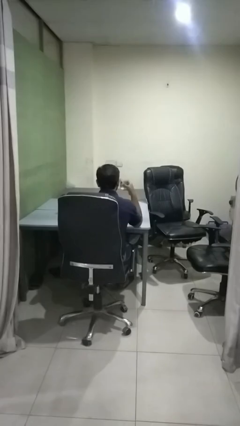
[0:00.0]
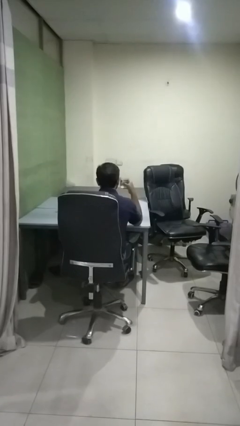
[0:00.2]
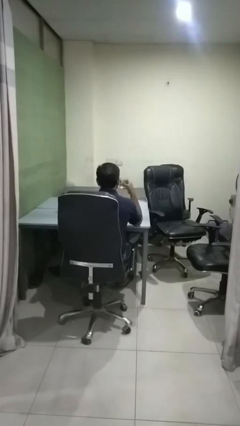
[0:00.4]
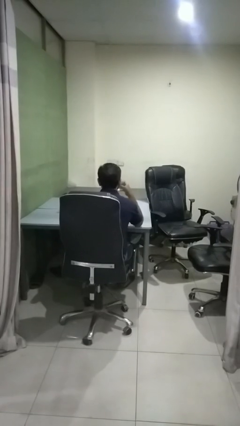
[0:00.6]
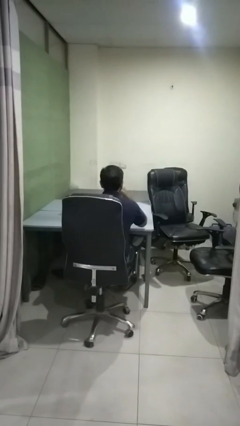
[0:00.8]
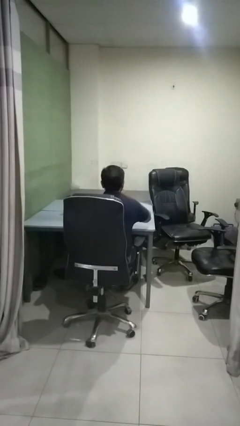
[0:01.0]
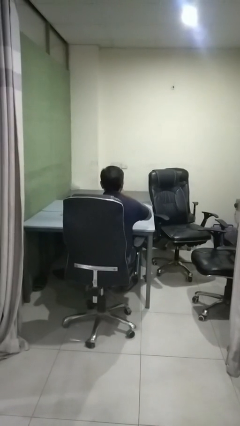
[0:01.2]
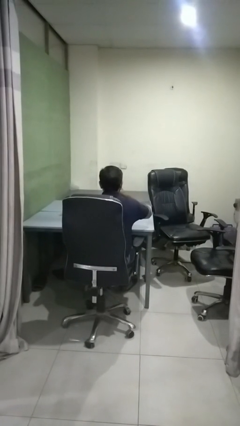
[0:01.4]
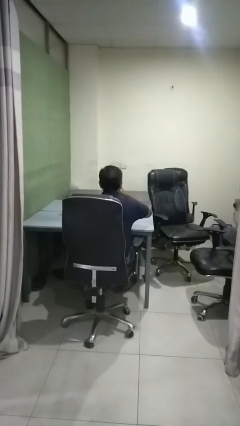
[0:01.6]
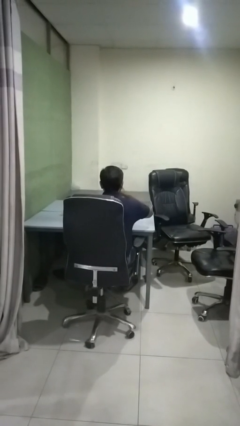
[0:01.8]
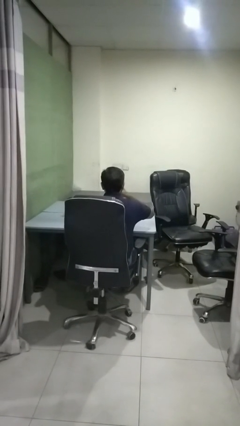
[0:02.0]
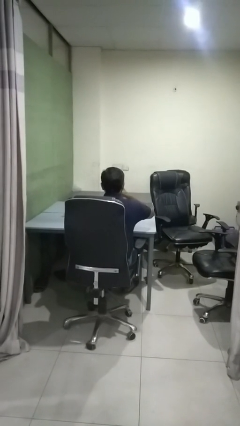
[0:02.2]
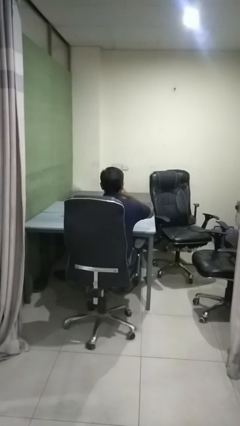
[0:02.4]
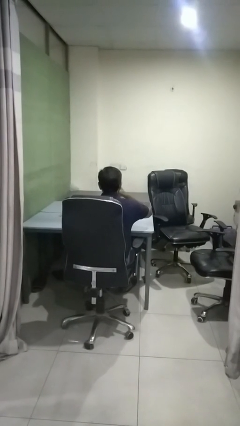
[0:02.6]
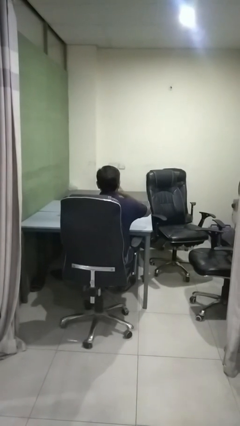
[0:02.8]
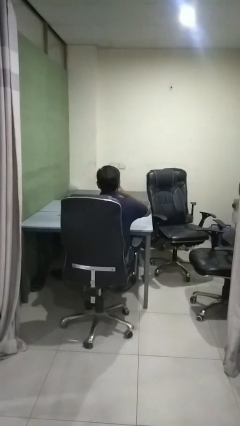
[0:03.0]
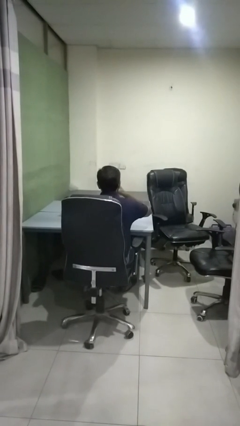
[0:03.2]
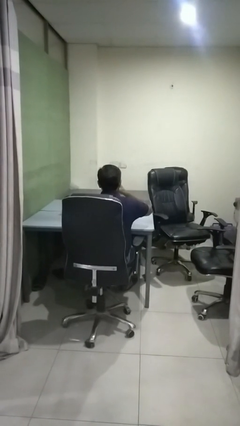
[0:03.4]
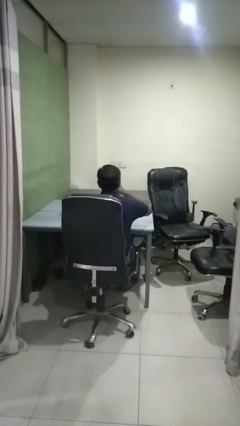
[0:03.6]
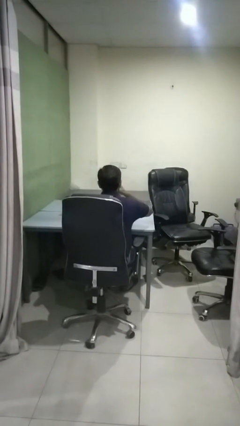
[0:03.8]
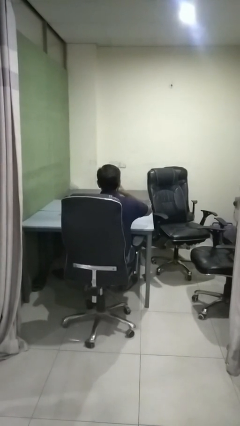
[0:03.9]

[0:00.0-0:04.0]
person drinks from shotglass

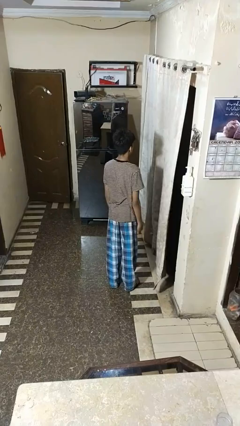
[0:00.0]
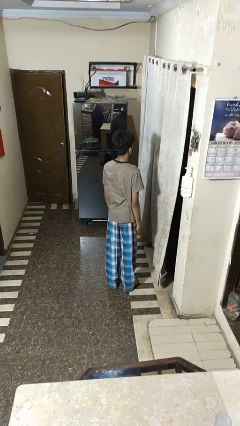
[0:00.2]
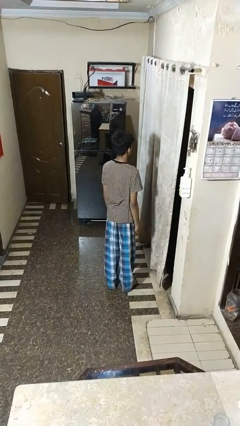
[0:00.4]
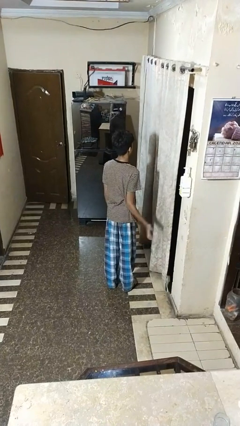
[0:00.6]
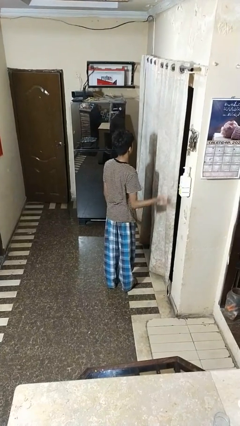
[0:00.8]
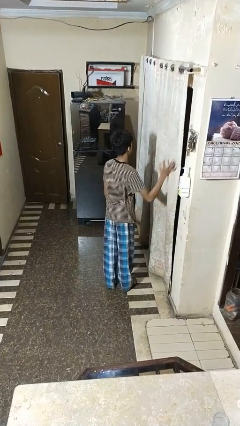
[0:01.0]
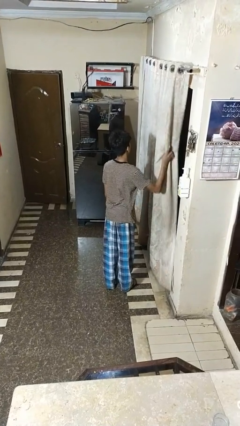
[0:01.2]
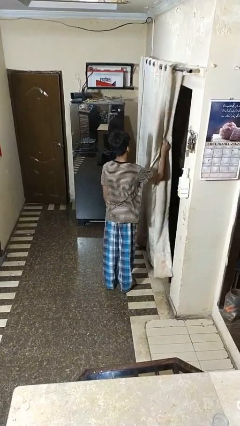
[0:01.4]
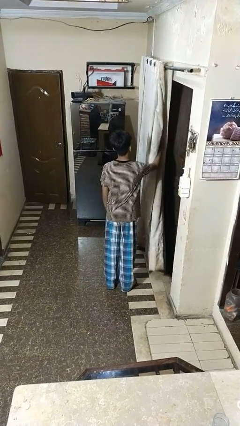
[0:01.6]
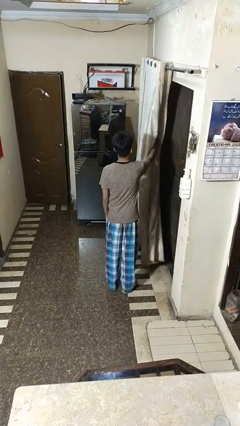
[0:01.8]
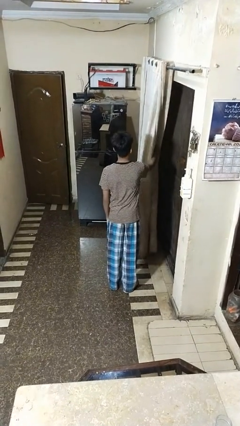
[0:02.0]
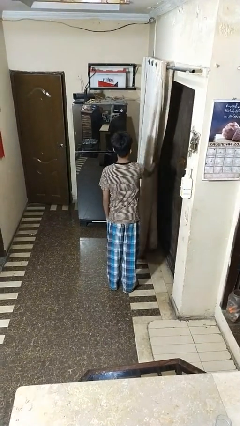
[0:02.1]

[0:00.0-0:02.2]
person opens curtains

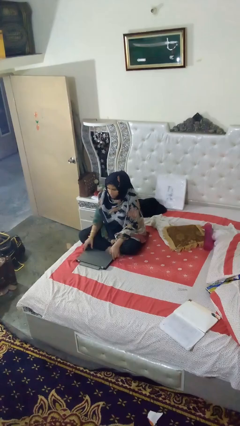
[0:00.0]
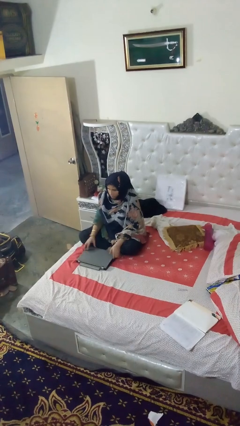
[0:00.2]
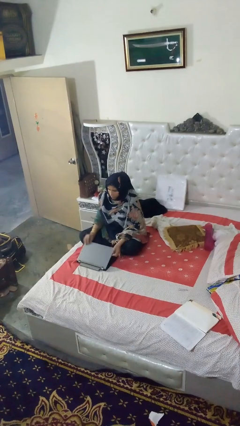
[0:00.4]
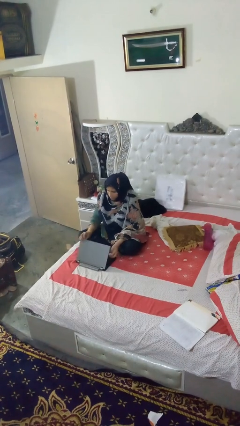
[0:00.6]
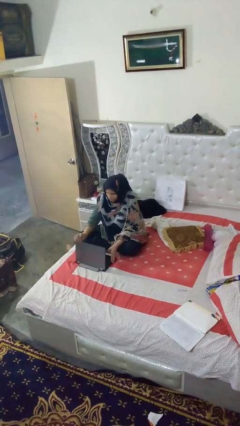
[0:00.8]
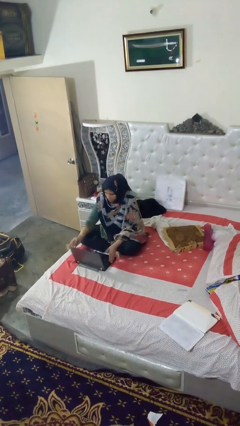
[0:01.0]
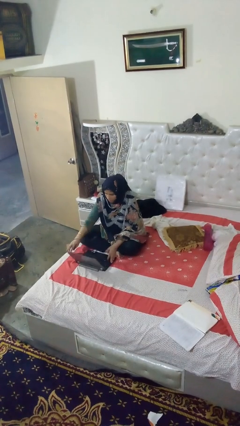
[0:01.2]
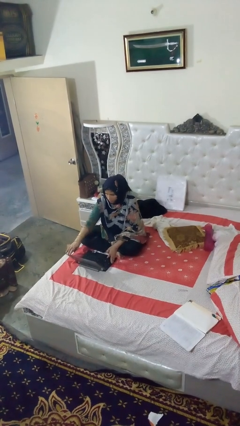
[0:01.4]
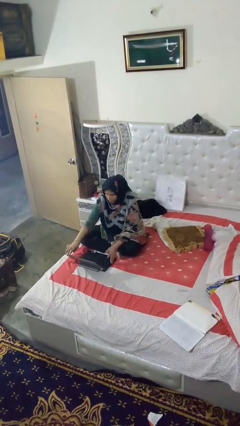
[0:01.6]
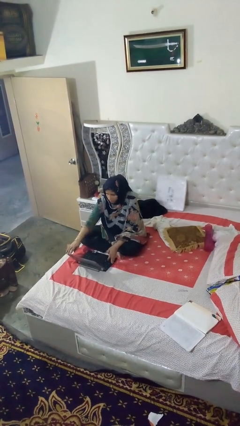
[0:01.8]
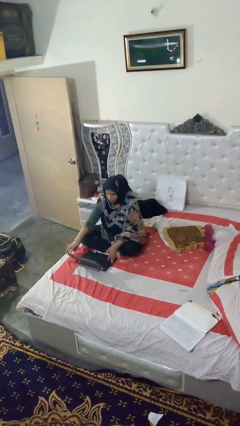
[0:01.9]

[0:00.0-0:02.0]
person opens laptop

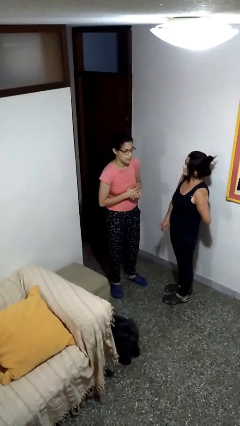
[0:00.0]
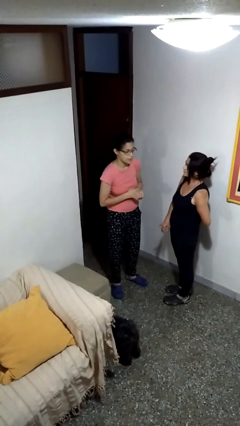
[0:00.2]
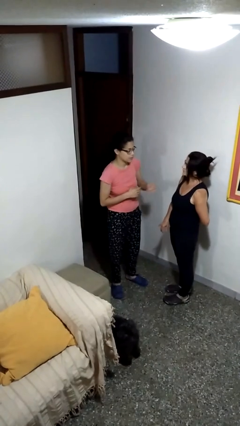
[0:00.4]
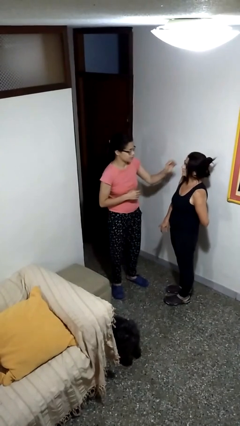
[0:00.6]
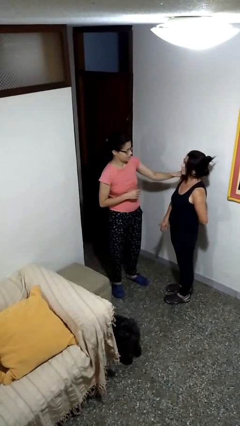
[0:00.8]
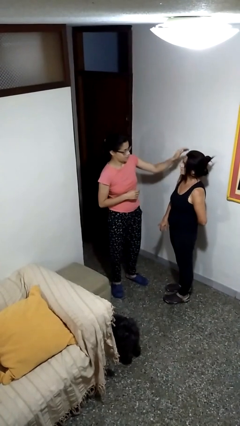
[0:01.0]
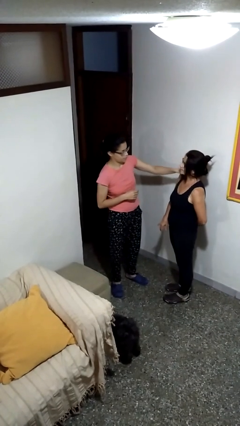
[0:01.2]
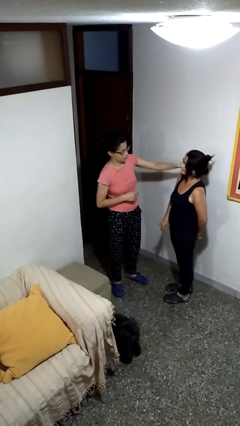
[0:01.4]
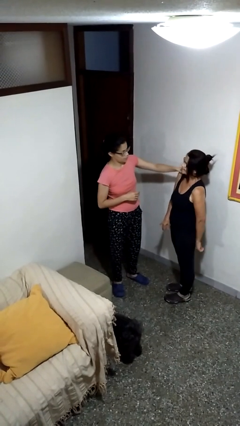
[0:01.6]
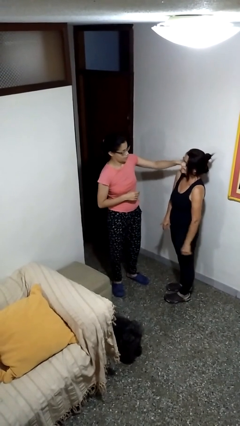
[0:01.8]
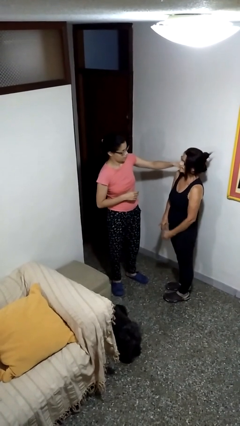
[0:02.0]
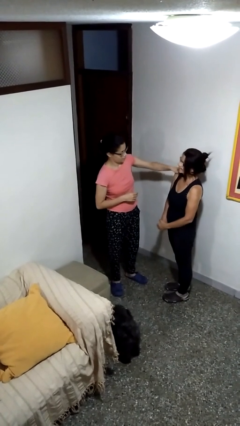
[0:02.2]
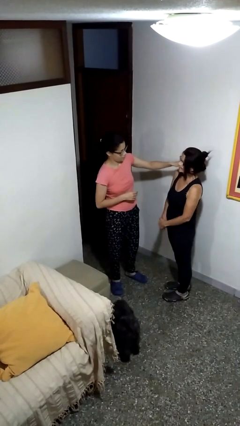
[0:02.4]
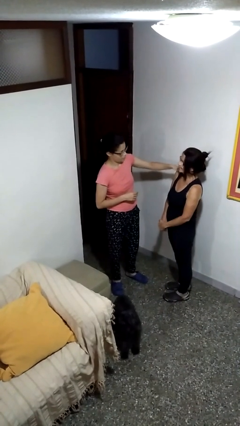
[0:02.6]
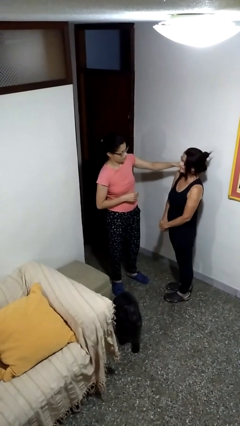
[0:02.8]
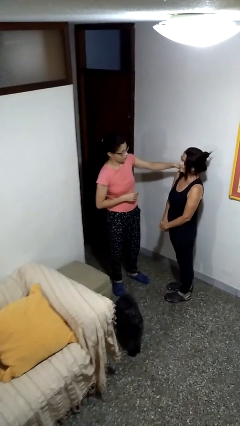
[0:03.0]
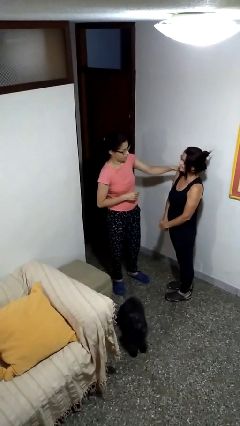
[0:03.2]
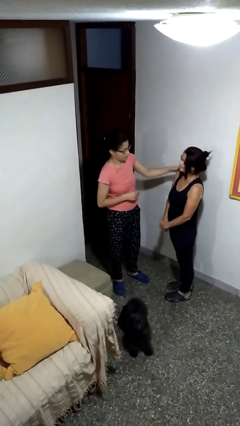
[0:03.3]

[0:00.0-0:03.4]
person pounds shoulders of person

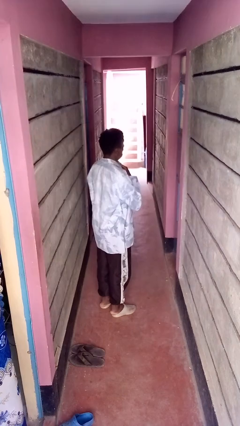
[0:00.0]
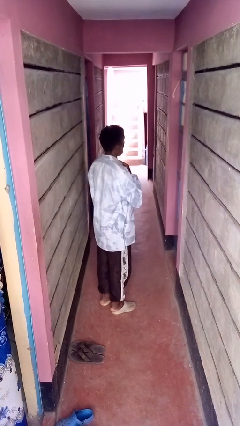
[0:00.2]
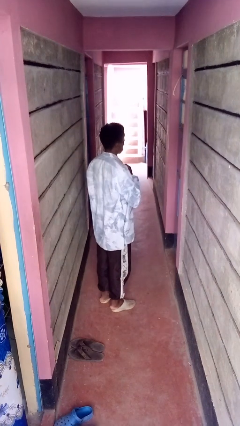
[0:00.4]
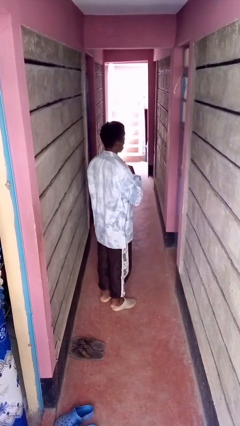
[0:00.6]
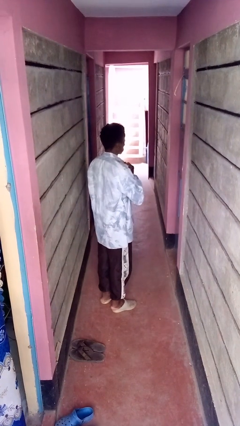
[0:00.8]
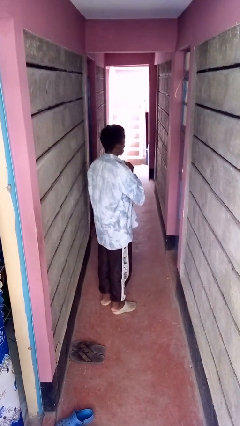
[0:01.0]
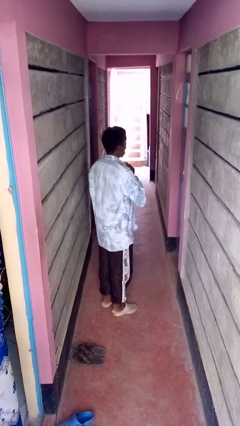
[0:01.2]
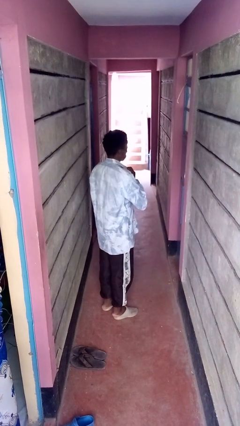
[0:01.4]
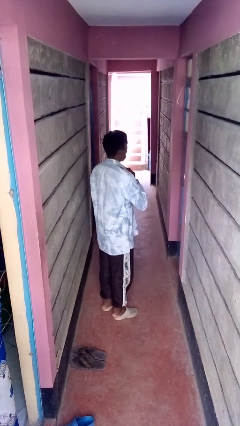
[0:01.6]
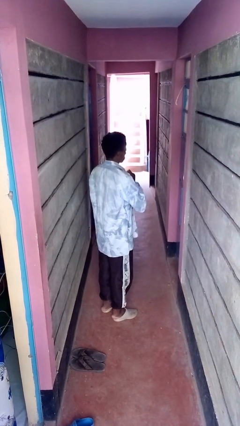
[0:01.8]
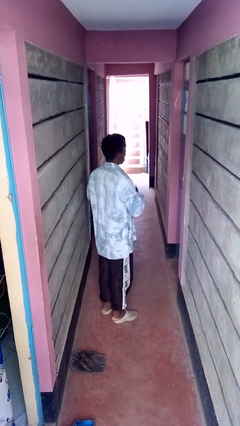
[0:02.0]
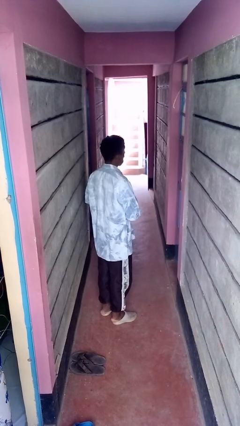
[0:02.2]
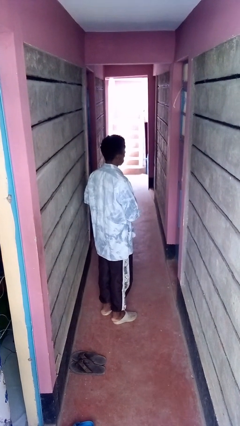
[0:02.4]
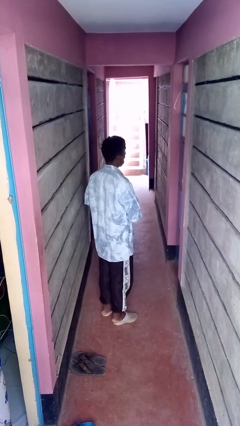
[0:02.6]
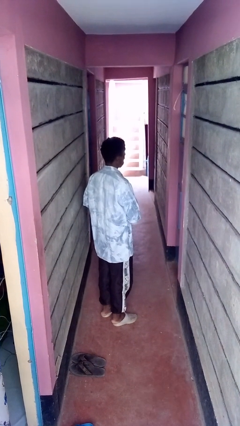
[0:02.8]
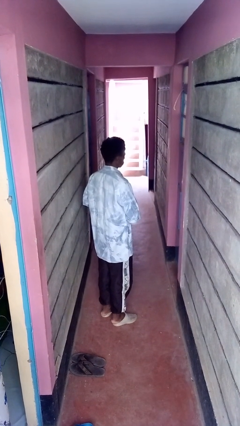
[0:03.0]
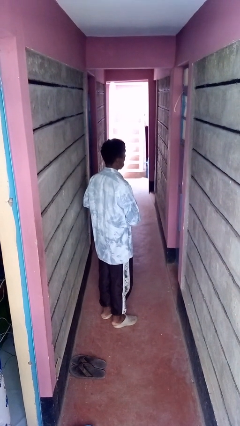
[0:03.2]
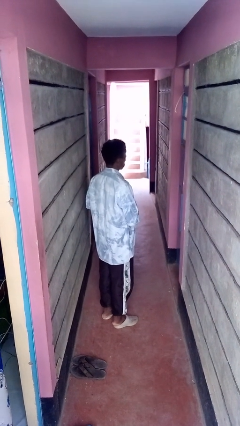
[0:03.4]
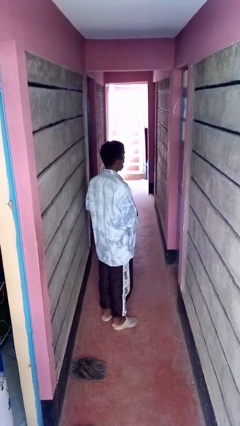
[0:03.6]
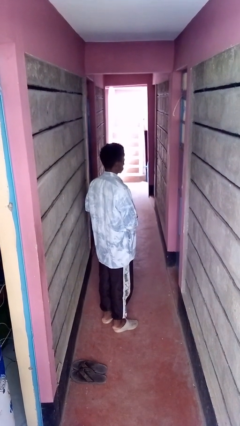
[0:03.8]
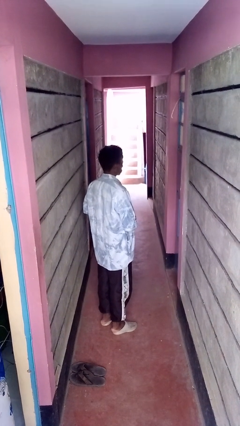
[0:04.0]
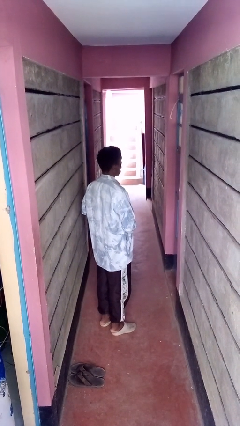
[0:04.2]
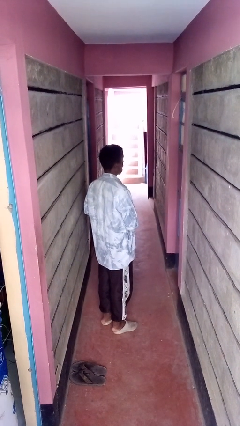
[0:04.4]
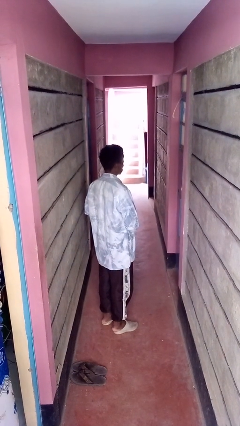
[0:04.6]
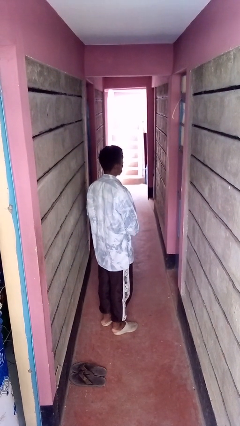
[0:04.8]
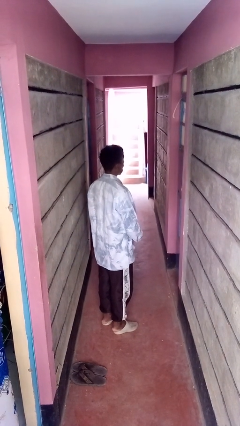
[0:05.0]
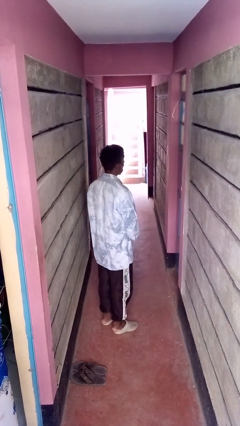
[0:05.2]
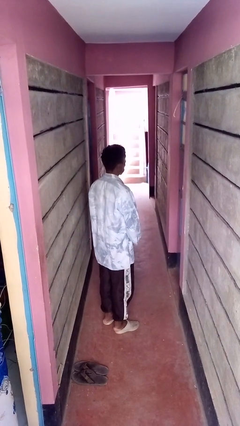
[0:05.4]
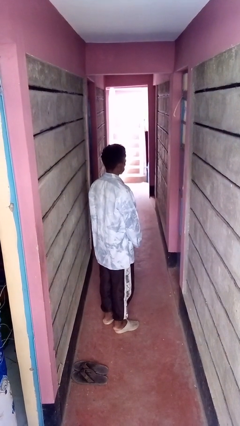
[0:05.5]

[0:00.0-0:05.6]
person buttons shirt

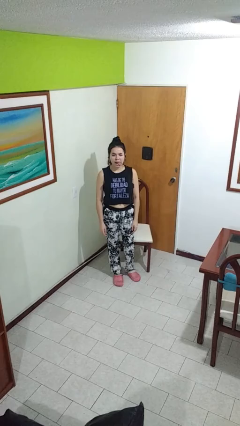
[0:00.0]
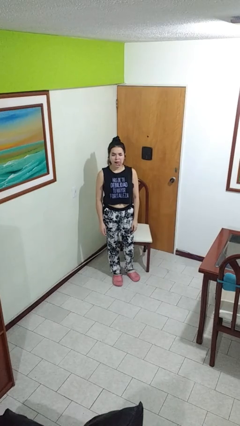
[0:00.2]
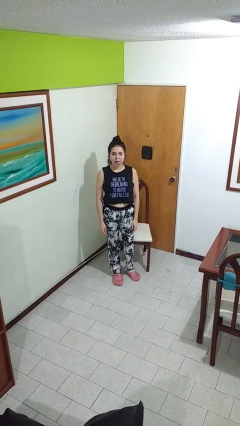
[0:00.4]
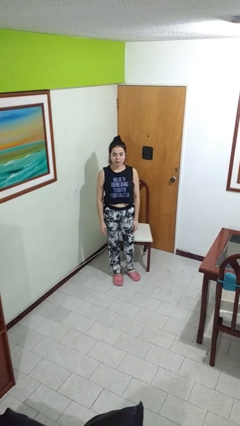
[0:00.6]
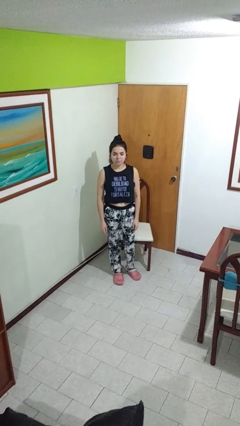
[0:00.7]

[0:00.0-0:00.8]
person sticks out tongue
